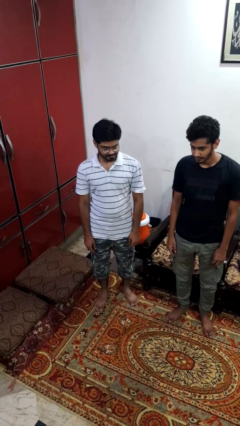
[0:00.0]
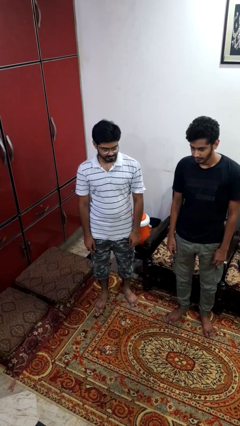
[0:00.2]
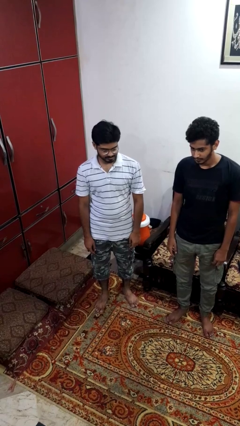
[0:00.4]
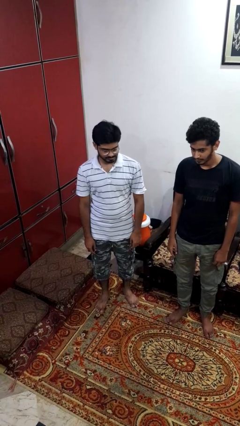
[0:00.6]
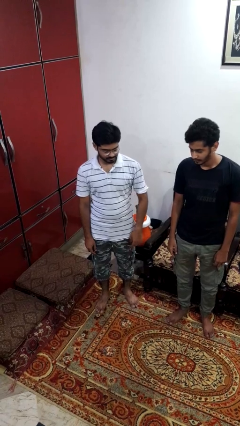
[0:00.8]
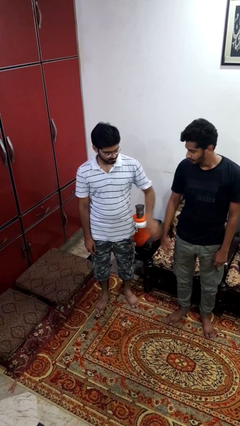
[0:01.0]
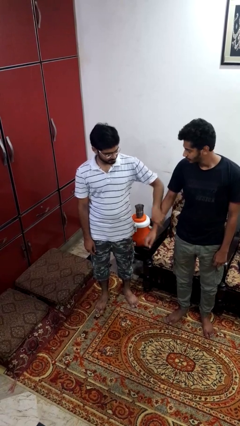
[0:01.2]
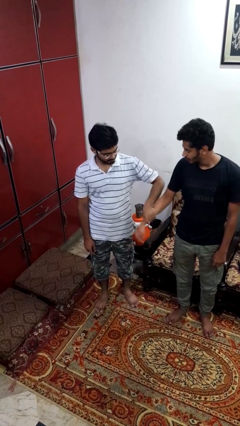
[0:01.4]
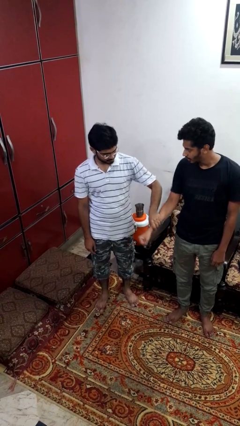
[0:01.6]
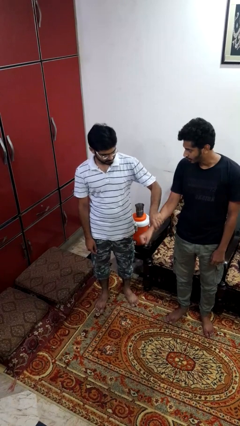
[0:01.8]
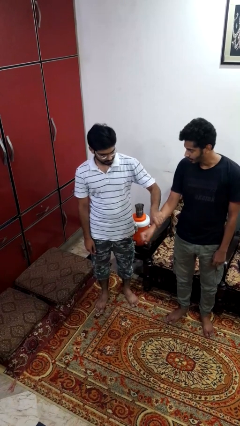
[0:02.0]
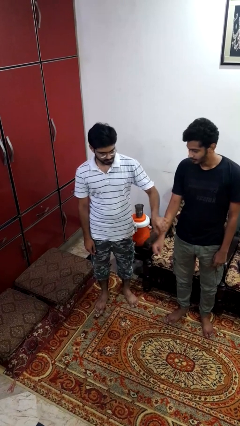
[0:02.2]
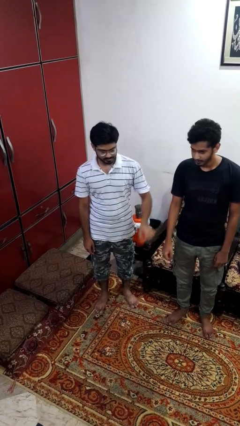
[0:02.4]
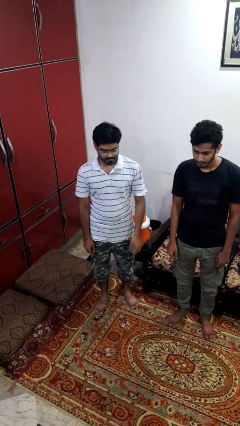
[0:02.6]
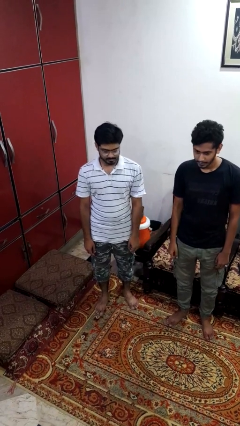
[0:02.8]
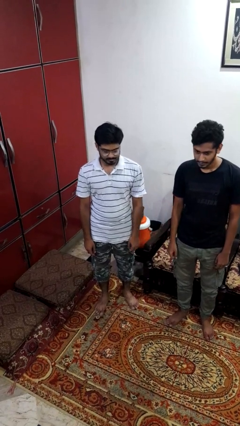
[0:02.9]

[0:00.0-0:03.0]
person grabs person by forearm

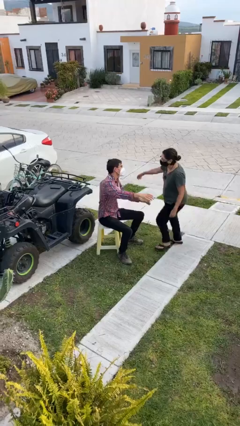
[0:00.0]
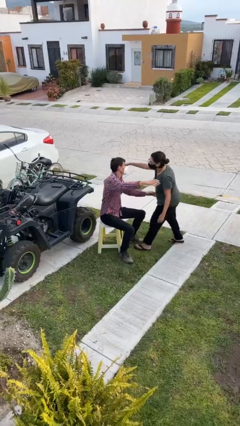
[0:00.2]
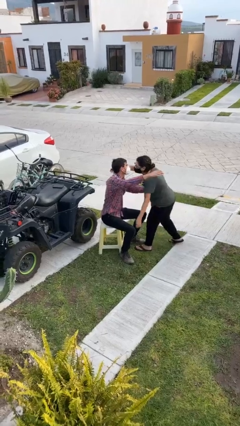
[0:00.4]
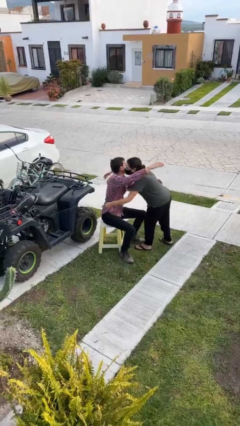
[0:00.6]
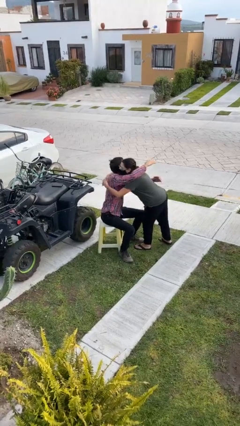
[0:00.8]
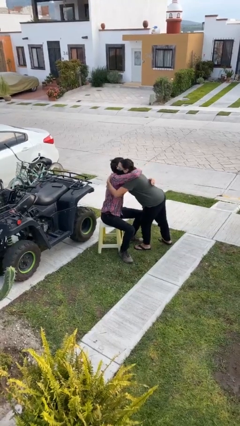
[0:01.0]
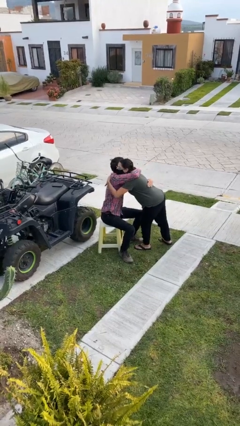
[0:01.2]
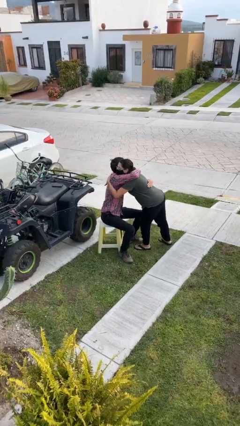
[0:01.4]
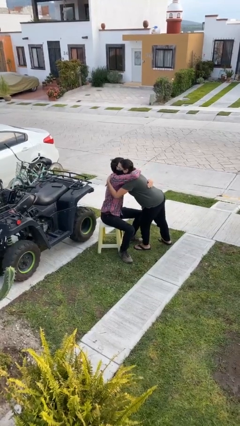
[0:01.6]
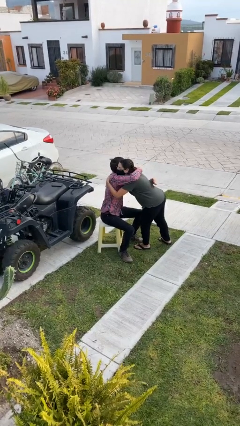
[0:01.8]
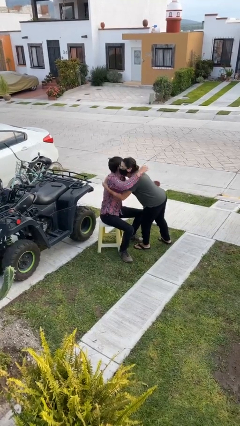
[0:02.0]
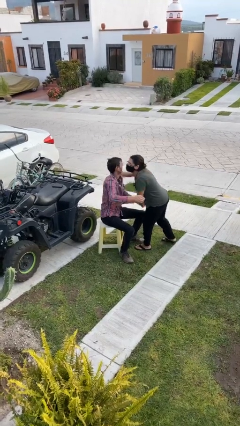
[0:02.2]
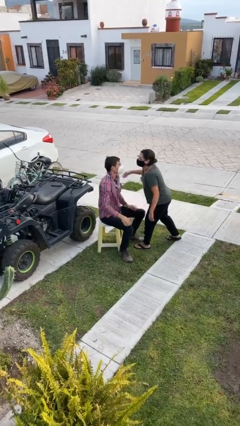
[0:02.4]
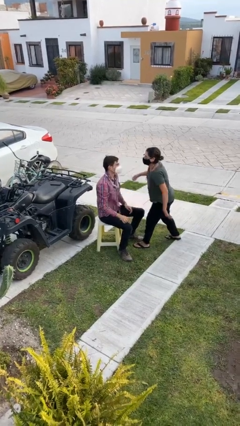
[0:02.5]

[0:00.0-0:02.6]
person embraces person

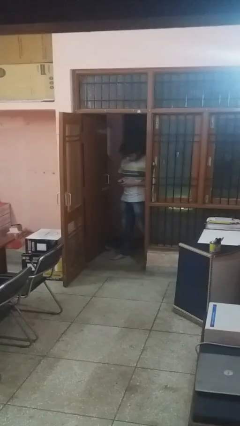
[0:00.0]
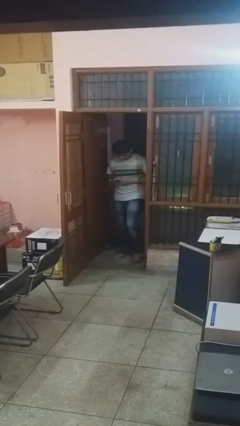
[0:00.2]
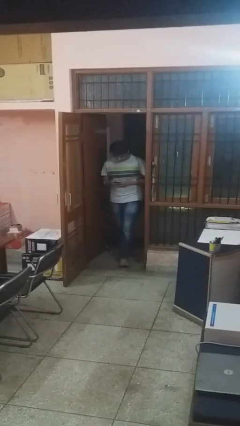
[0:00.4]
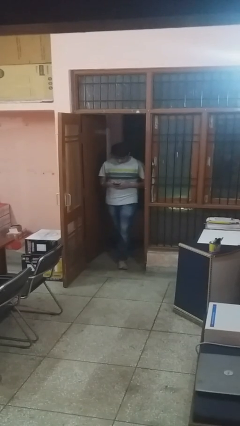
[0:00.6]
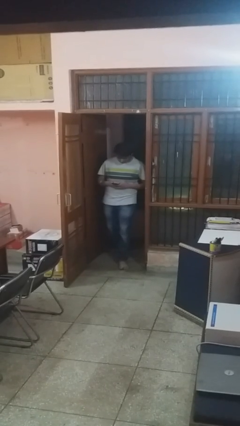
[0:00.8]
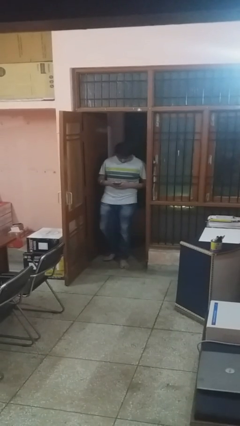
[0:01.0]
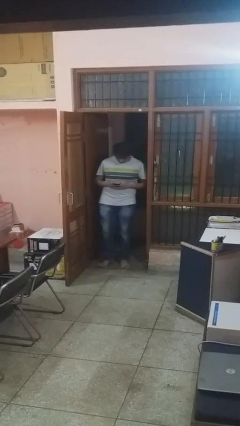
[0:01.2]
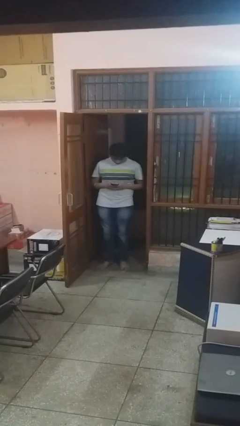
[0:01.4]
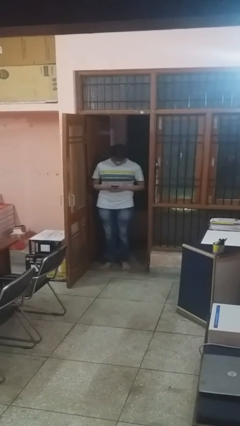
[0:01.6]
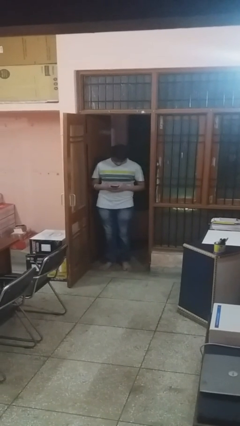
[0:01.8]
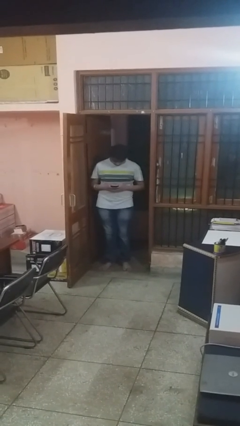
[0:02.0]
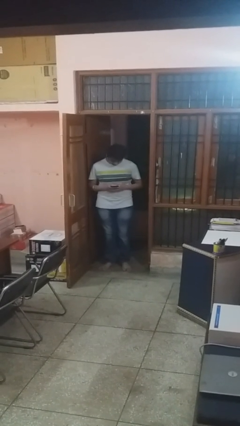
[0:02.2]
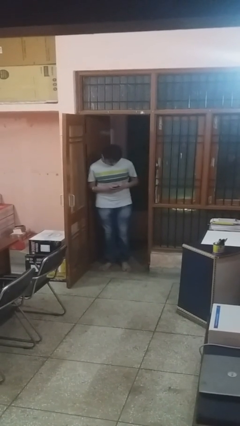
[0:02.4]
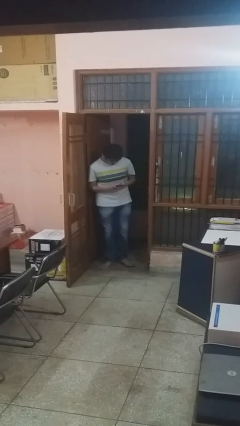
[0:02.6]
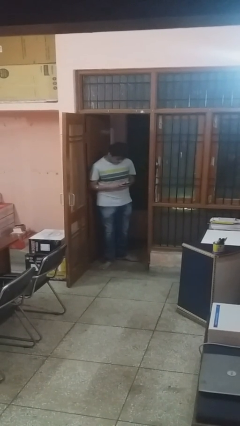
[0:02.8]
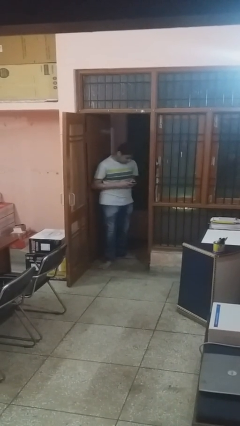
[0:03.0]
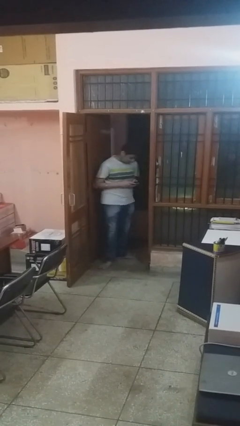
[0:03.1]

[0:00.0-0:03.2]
person enters scene through structure

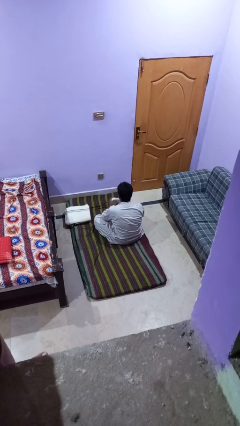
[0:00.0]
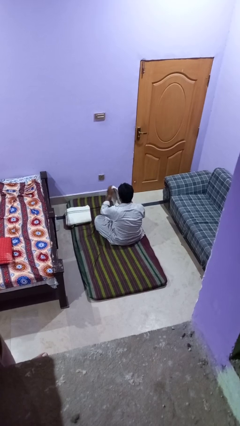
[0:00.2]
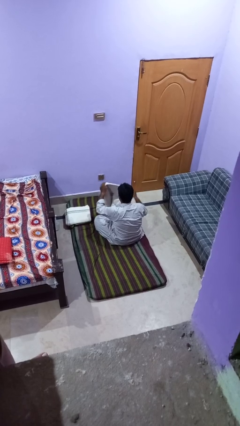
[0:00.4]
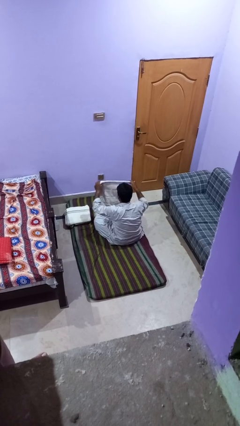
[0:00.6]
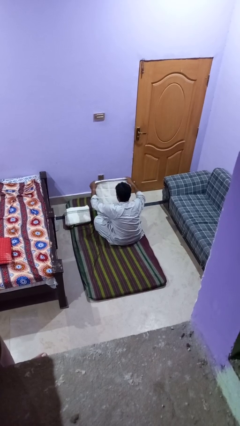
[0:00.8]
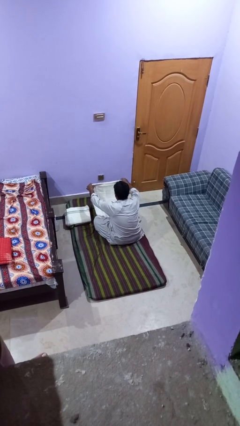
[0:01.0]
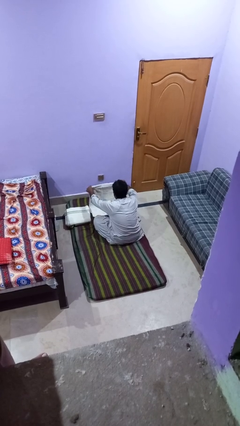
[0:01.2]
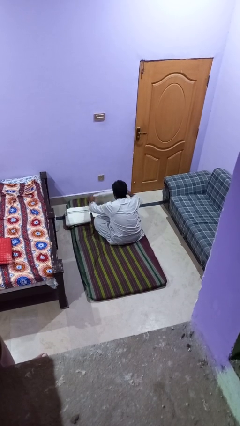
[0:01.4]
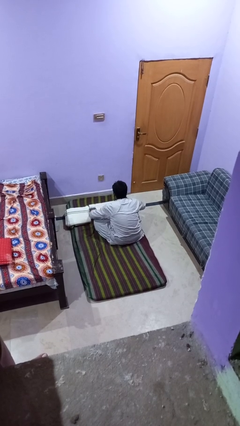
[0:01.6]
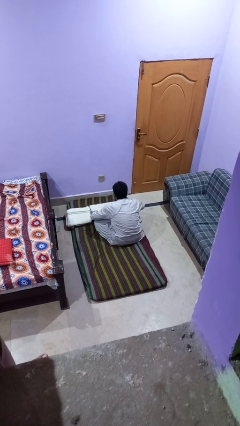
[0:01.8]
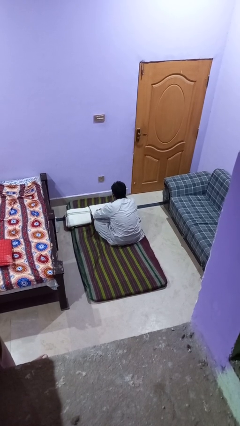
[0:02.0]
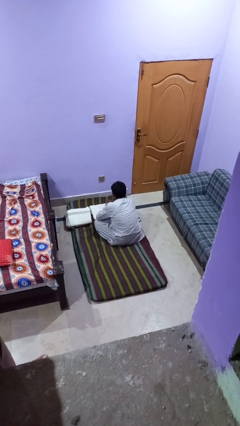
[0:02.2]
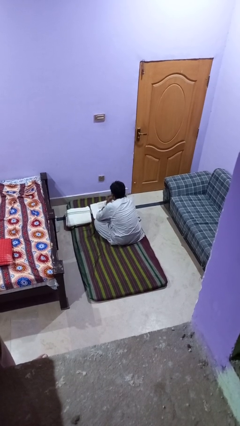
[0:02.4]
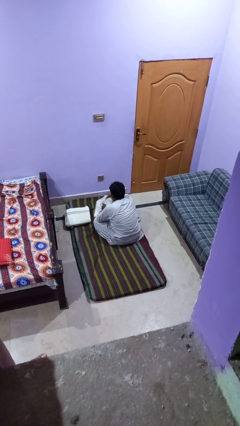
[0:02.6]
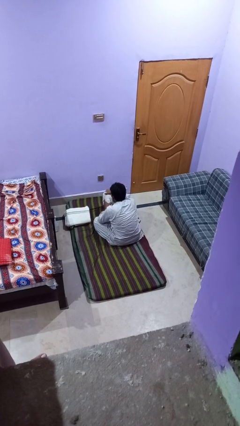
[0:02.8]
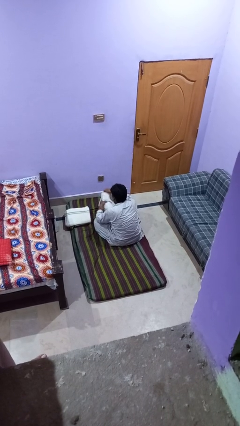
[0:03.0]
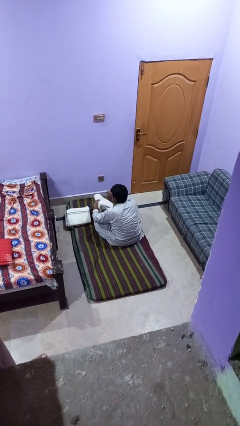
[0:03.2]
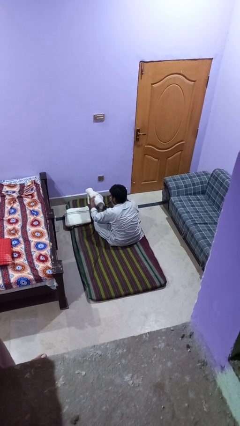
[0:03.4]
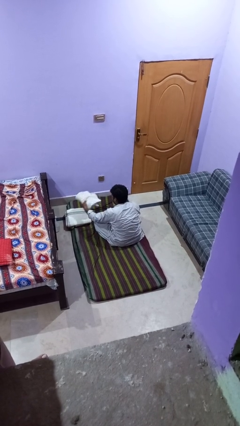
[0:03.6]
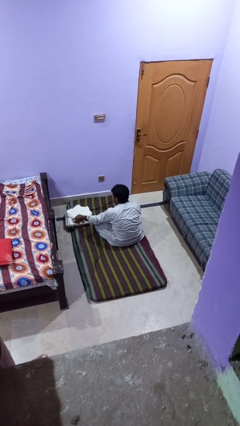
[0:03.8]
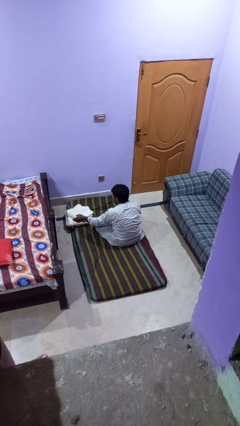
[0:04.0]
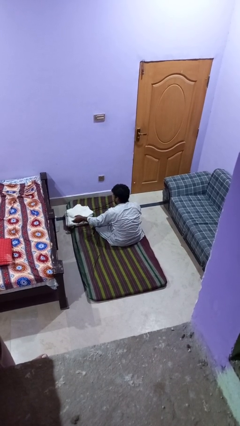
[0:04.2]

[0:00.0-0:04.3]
person folds towel

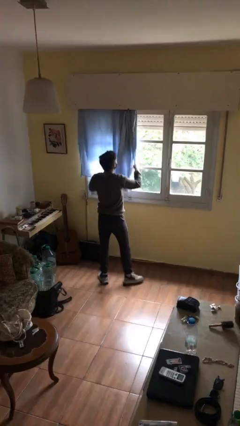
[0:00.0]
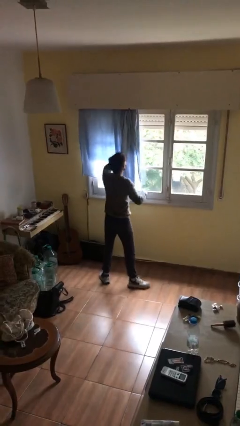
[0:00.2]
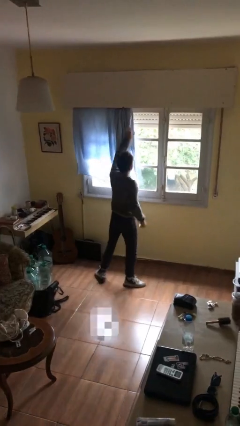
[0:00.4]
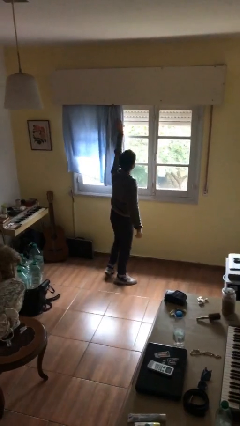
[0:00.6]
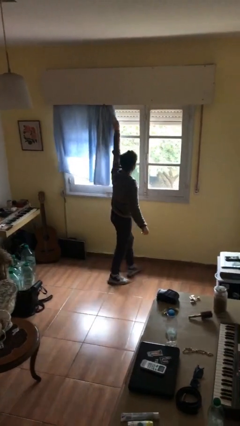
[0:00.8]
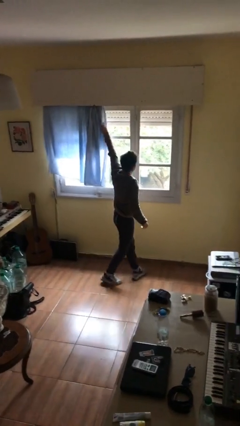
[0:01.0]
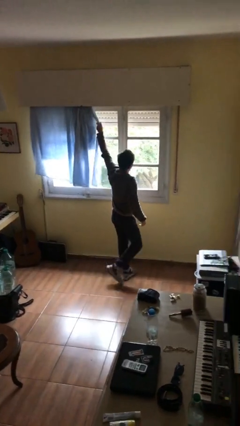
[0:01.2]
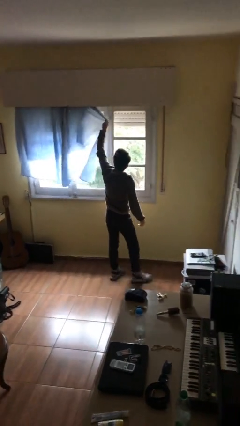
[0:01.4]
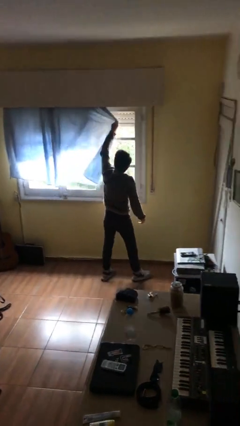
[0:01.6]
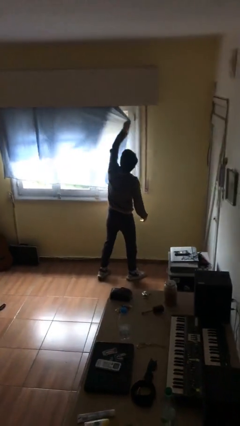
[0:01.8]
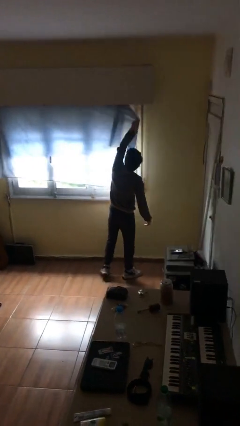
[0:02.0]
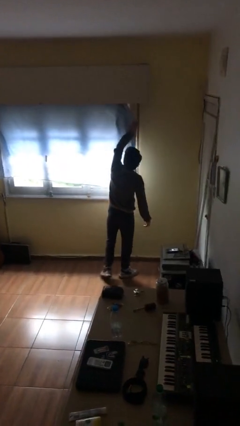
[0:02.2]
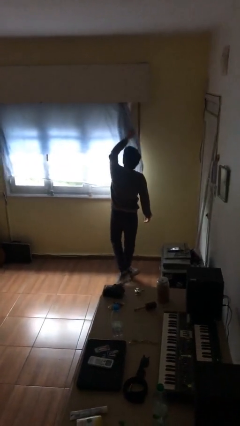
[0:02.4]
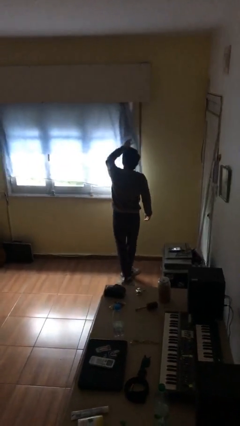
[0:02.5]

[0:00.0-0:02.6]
person closes curtains

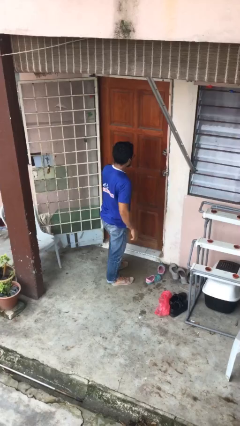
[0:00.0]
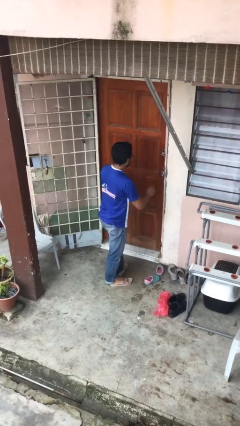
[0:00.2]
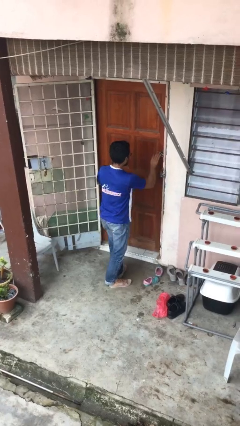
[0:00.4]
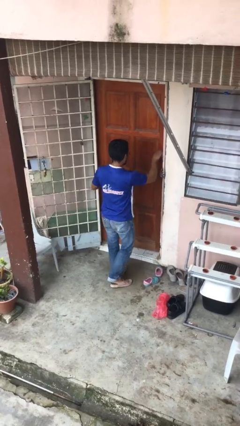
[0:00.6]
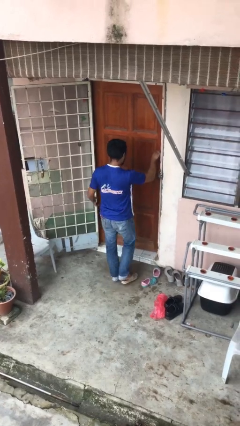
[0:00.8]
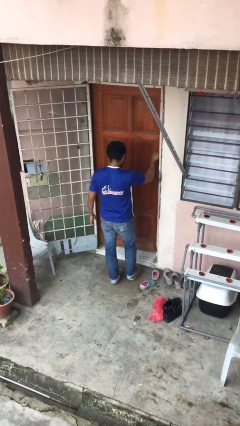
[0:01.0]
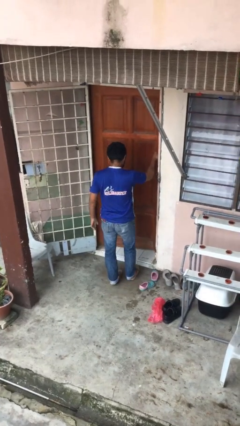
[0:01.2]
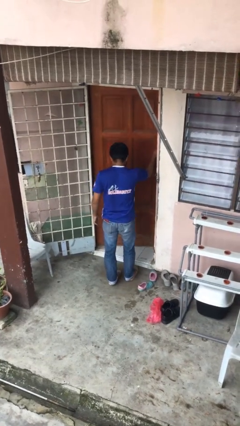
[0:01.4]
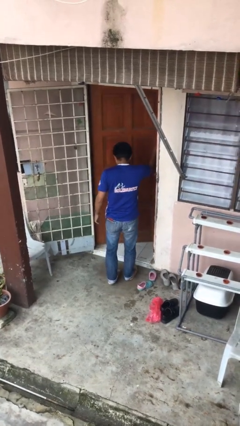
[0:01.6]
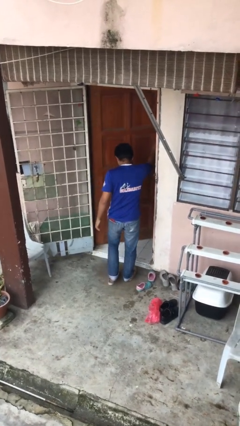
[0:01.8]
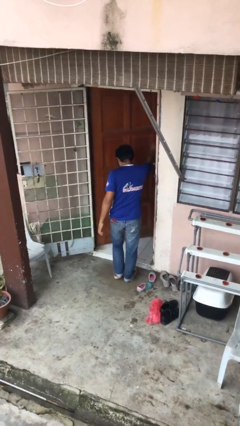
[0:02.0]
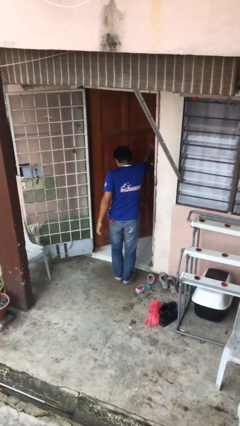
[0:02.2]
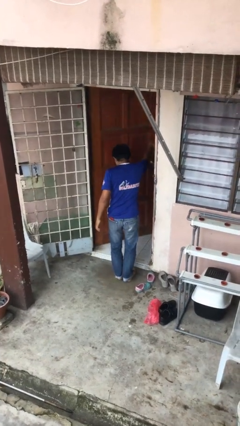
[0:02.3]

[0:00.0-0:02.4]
person opens facility door
